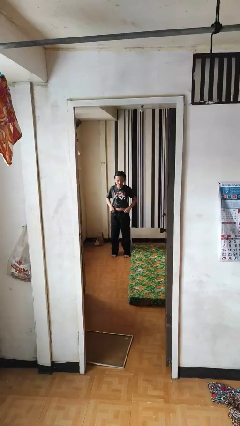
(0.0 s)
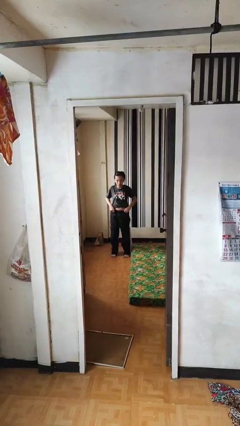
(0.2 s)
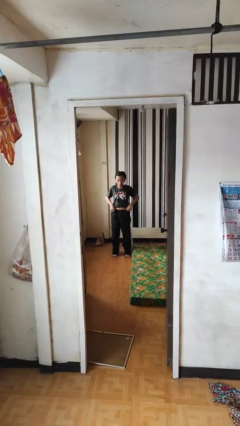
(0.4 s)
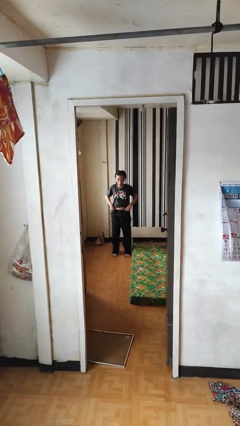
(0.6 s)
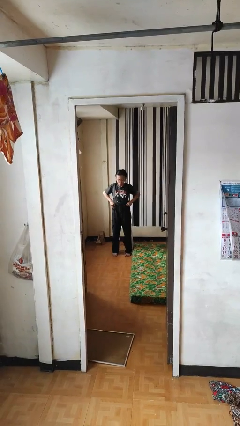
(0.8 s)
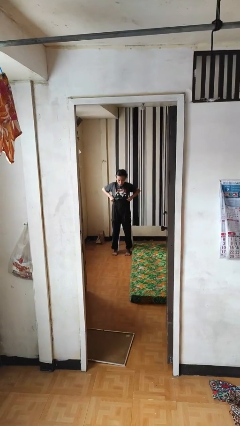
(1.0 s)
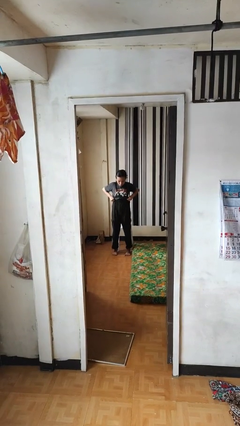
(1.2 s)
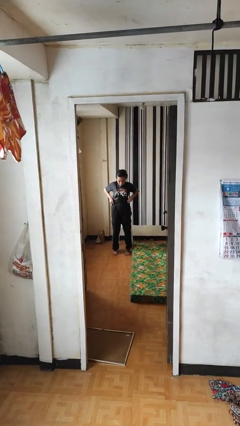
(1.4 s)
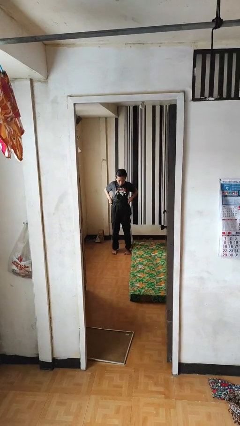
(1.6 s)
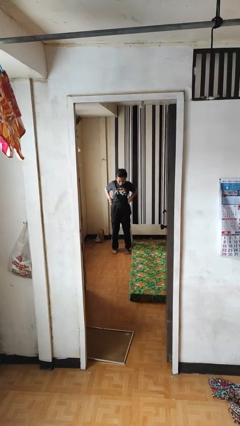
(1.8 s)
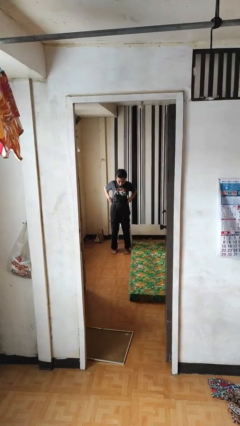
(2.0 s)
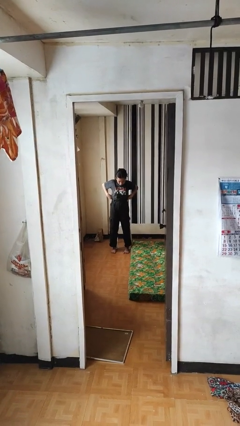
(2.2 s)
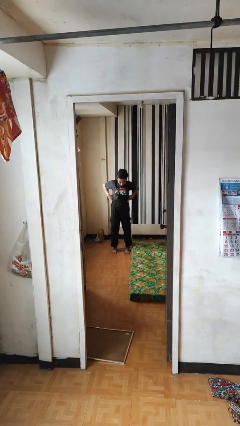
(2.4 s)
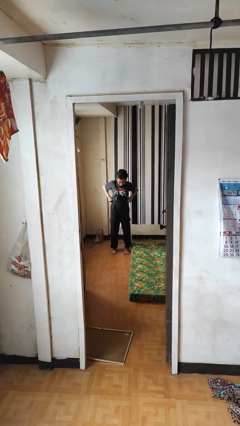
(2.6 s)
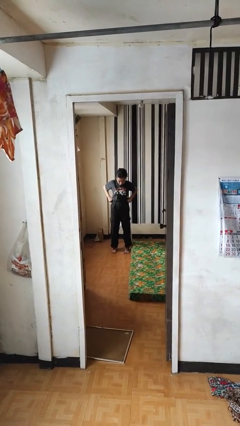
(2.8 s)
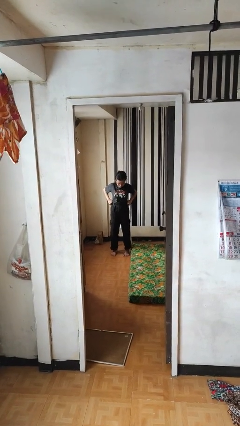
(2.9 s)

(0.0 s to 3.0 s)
person hikes up pants

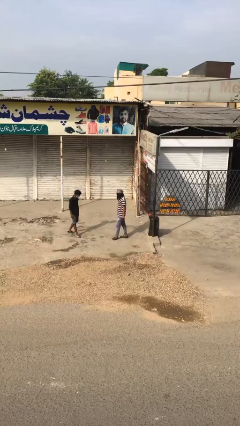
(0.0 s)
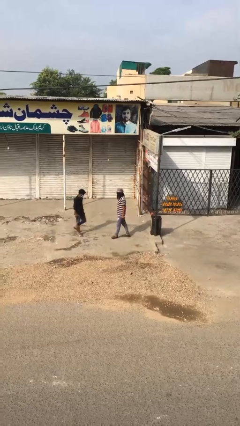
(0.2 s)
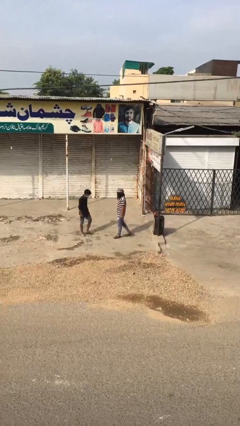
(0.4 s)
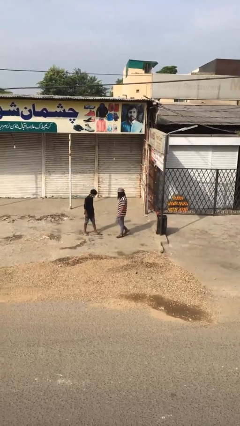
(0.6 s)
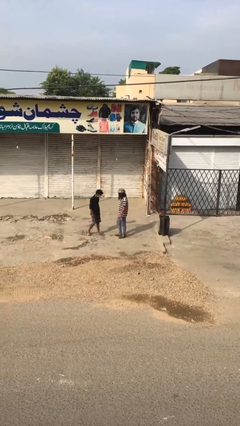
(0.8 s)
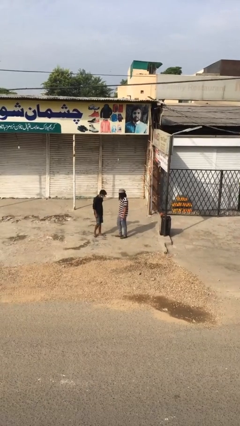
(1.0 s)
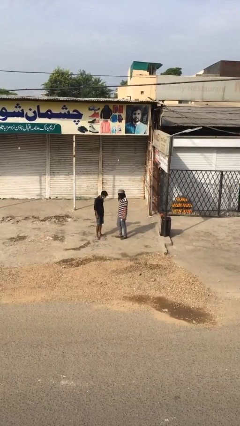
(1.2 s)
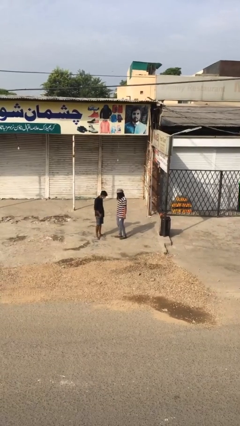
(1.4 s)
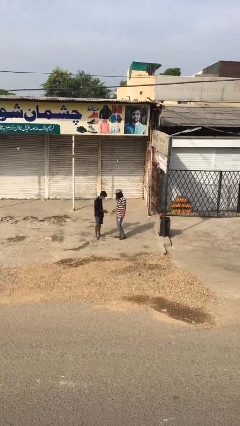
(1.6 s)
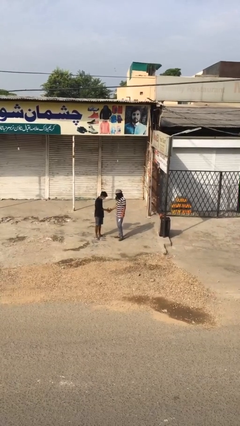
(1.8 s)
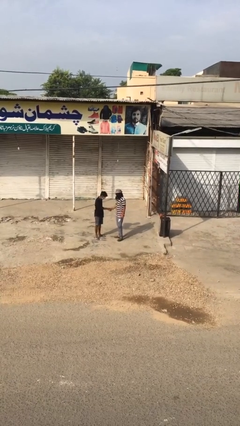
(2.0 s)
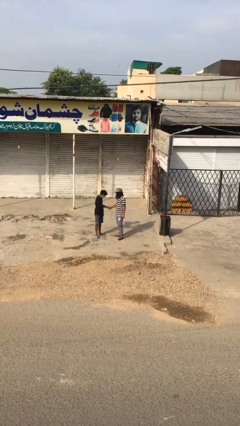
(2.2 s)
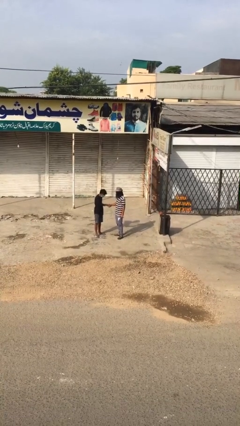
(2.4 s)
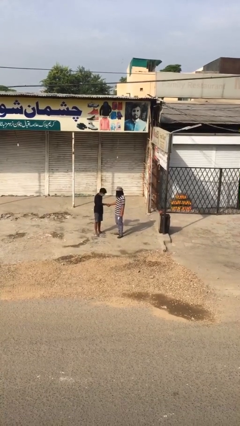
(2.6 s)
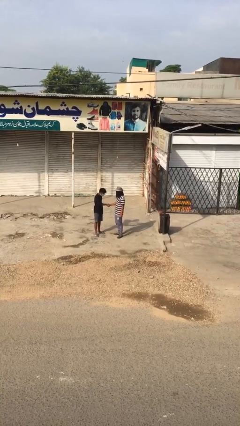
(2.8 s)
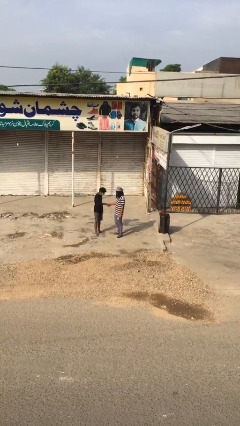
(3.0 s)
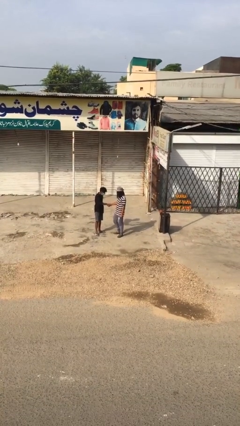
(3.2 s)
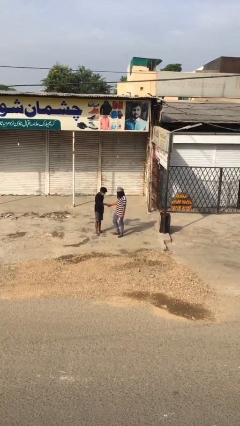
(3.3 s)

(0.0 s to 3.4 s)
person shakes hand

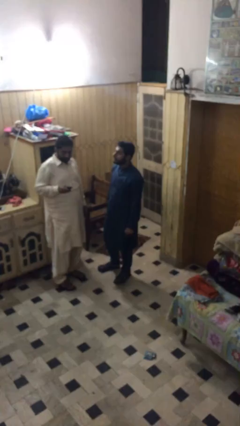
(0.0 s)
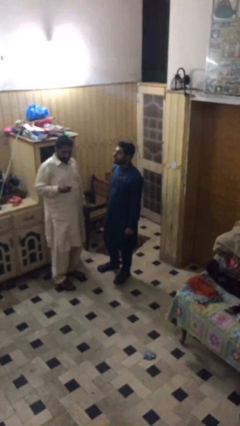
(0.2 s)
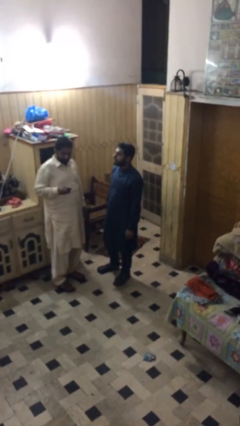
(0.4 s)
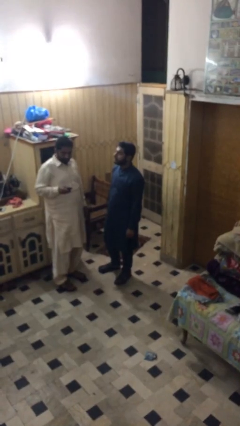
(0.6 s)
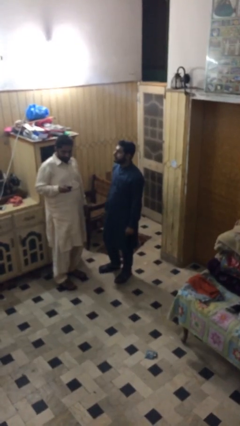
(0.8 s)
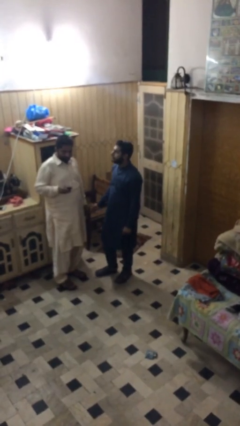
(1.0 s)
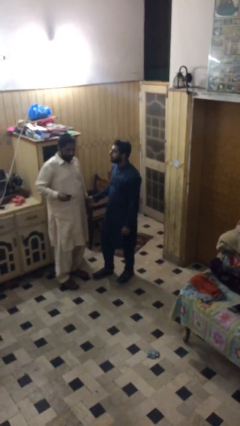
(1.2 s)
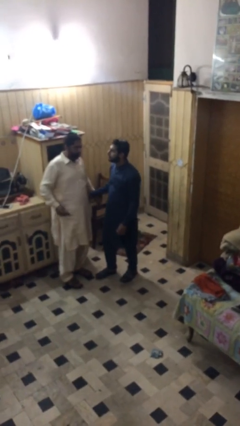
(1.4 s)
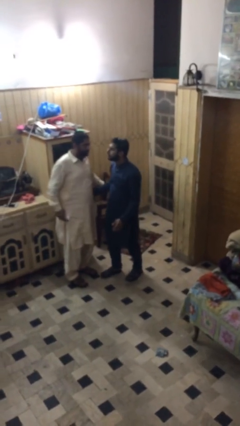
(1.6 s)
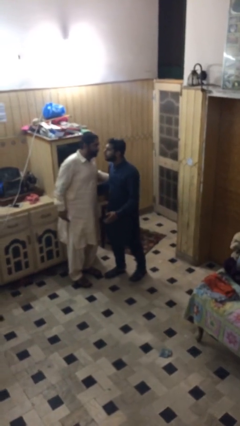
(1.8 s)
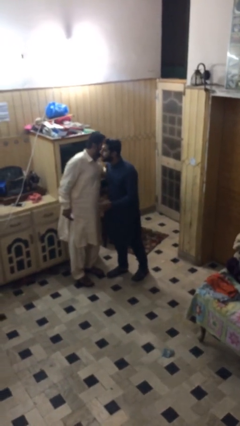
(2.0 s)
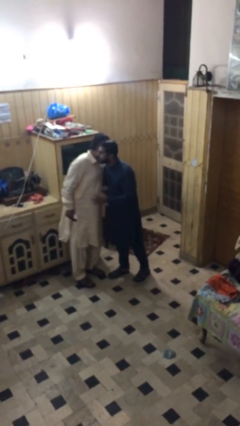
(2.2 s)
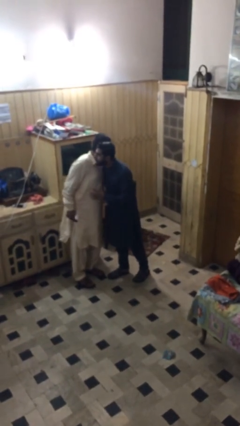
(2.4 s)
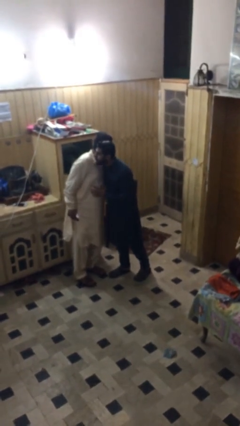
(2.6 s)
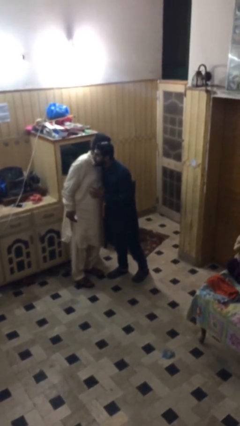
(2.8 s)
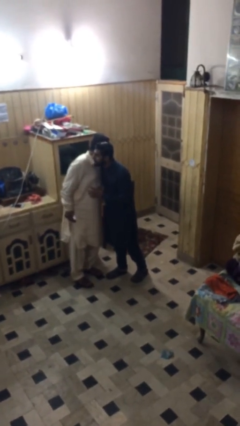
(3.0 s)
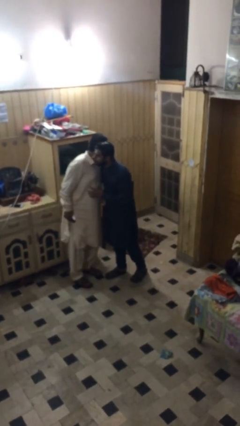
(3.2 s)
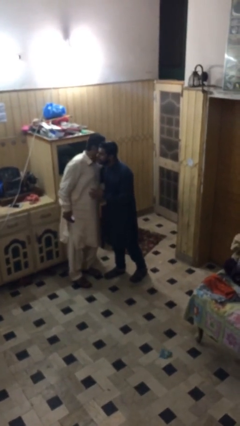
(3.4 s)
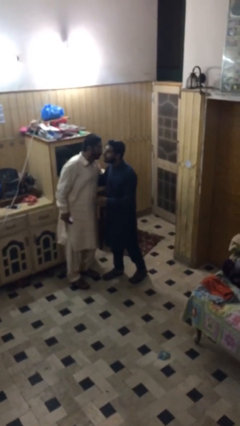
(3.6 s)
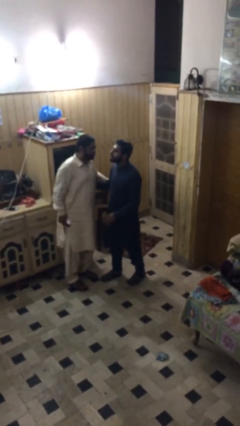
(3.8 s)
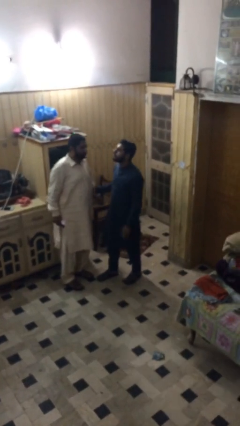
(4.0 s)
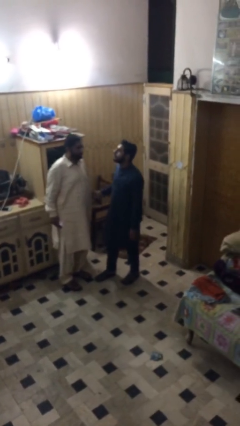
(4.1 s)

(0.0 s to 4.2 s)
person embraces person

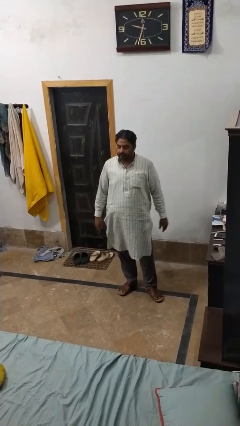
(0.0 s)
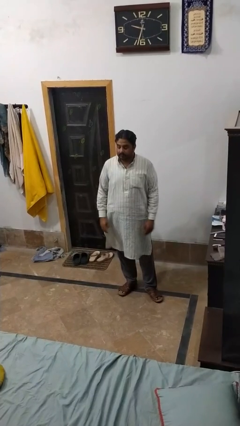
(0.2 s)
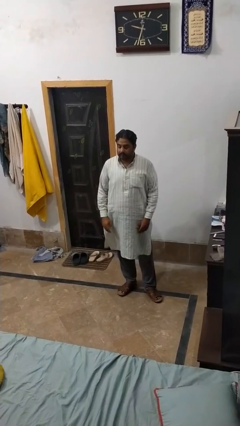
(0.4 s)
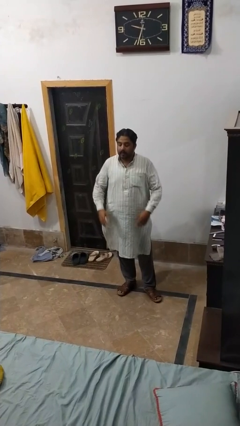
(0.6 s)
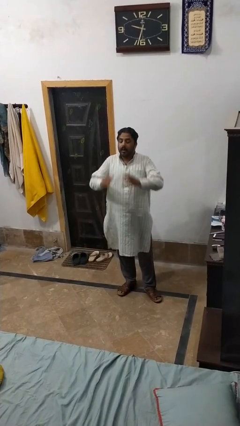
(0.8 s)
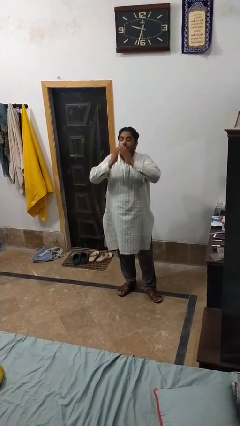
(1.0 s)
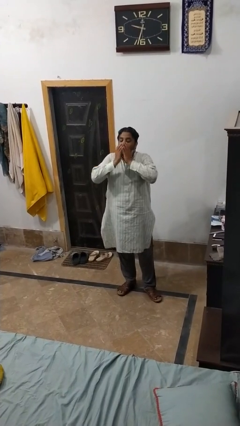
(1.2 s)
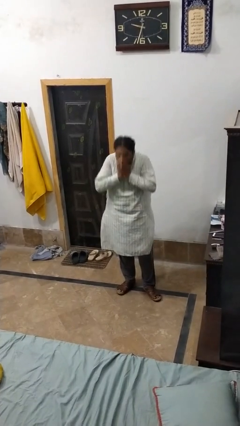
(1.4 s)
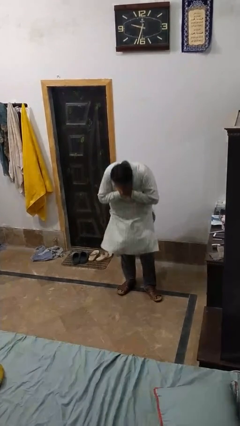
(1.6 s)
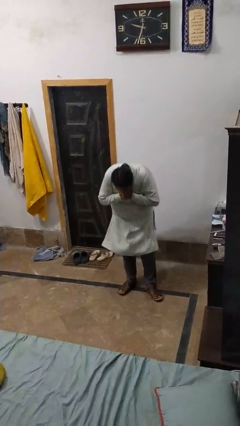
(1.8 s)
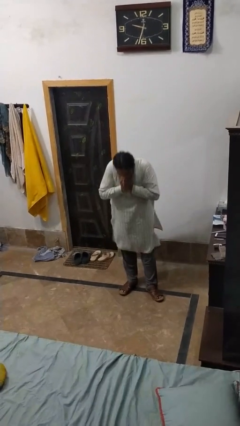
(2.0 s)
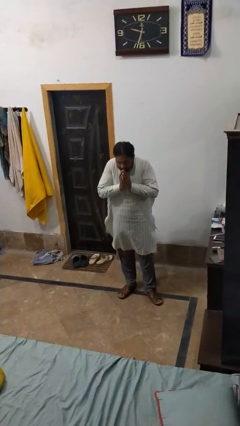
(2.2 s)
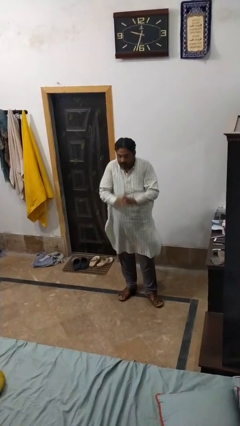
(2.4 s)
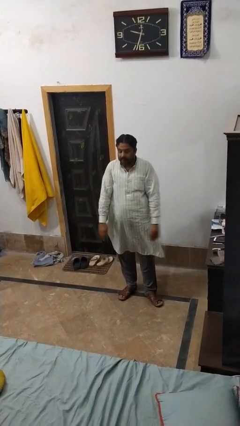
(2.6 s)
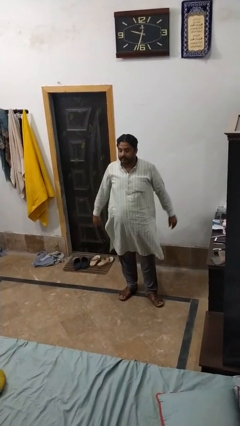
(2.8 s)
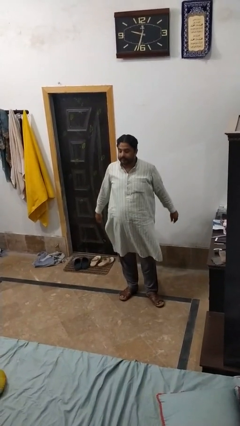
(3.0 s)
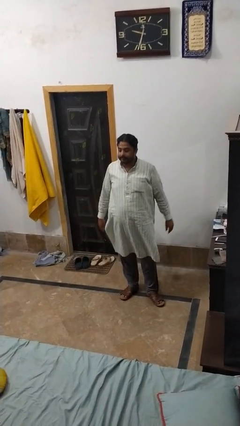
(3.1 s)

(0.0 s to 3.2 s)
person sneezes into hand

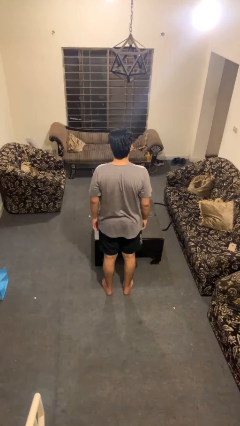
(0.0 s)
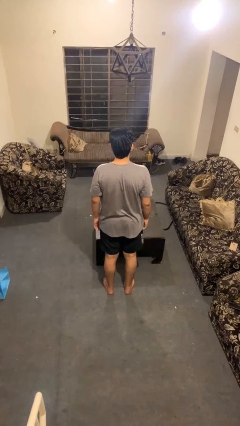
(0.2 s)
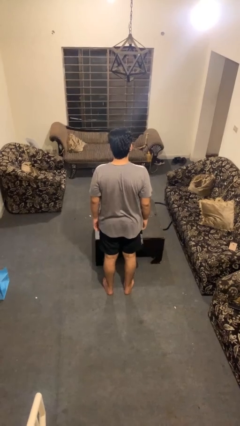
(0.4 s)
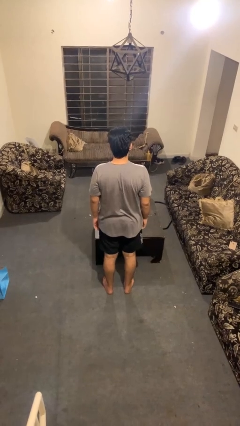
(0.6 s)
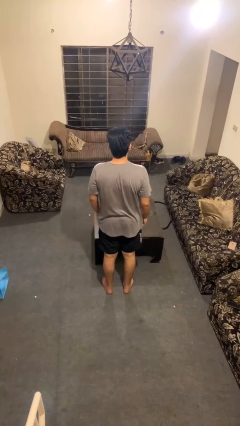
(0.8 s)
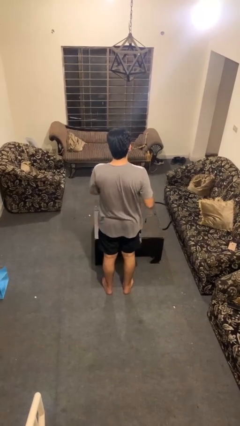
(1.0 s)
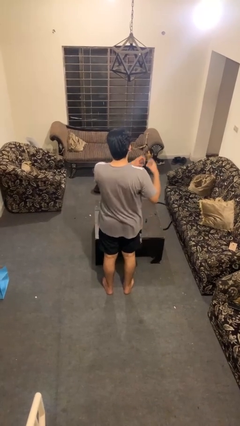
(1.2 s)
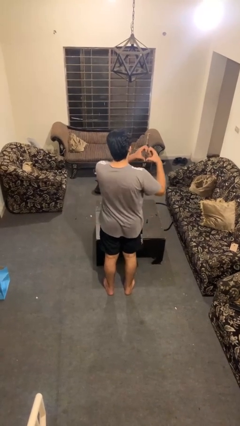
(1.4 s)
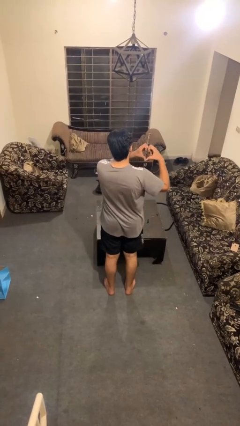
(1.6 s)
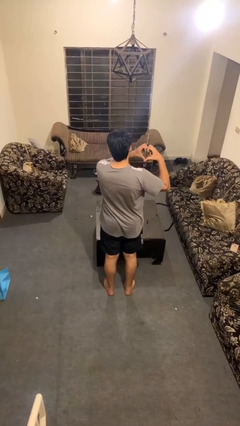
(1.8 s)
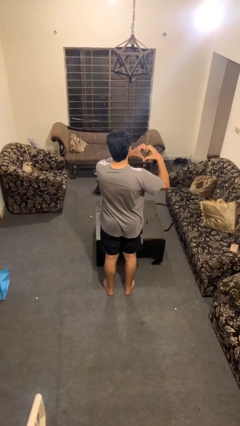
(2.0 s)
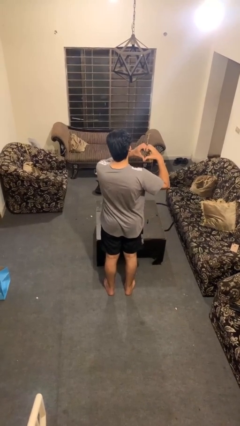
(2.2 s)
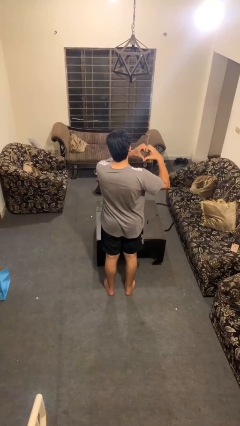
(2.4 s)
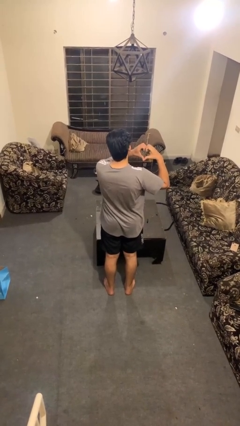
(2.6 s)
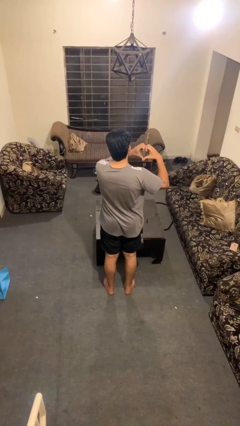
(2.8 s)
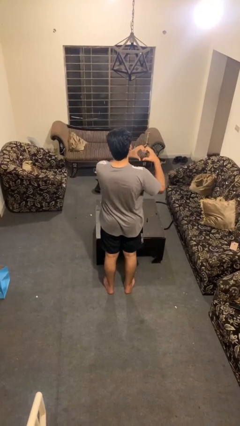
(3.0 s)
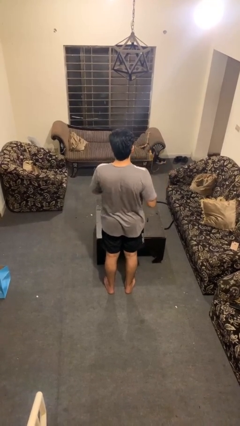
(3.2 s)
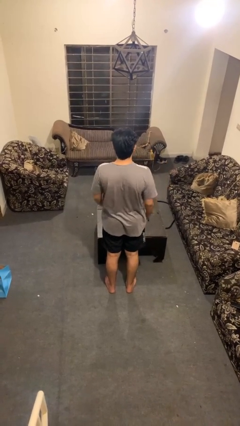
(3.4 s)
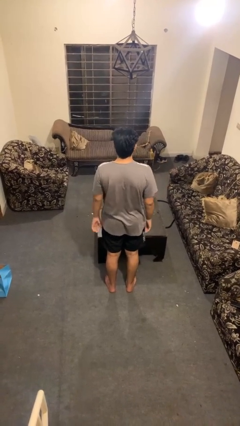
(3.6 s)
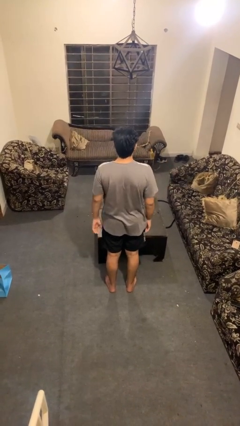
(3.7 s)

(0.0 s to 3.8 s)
person gestures heart
